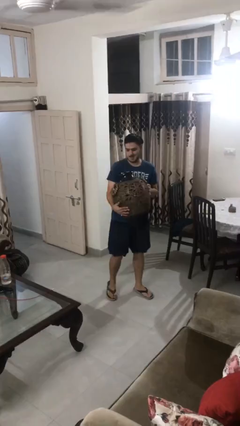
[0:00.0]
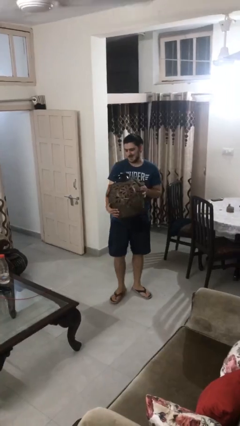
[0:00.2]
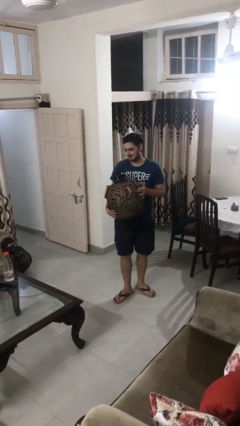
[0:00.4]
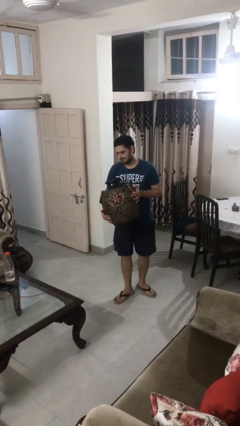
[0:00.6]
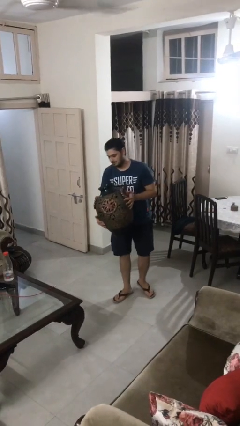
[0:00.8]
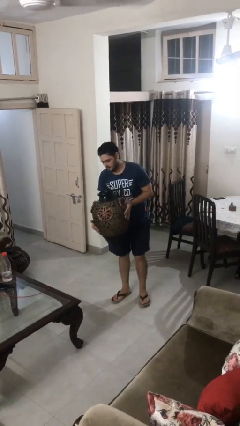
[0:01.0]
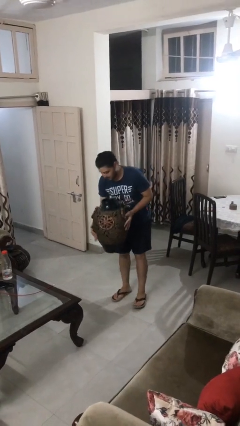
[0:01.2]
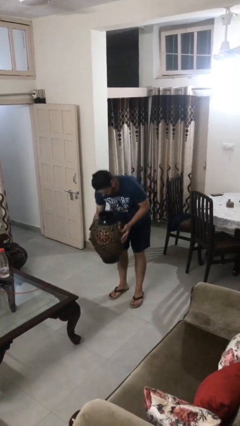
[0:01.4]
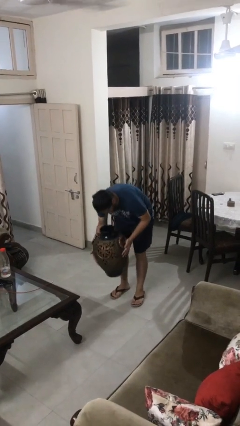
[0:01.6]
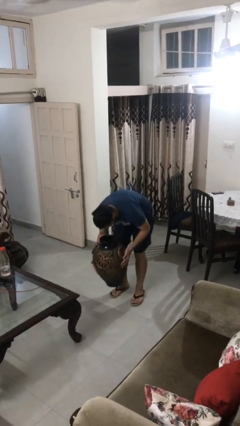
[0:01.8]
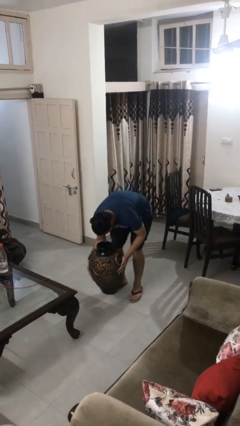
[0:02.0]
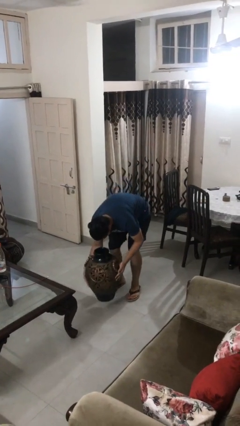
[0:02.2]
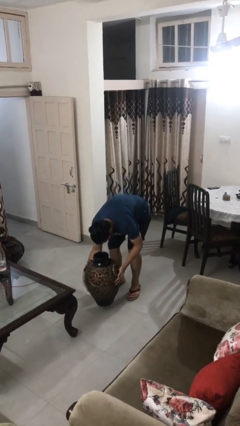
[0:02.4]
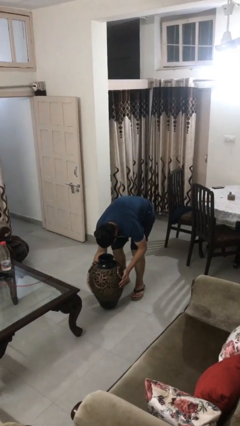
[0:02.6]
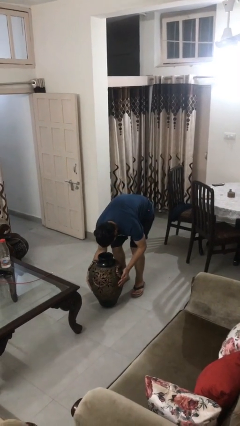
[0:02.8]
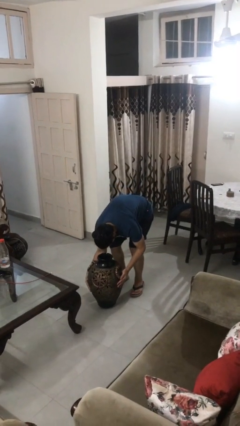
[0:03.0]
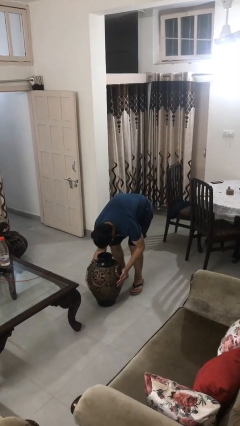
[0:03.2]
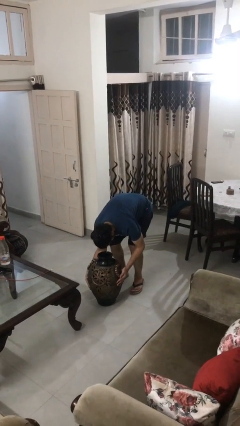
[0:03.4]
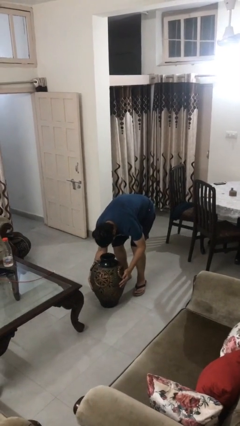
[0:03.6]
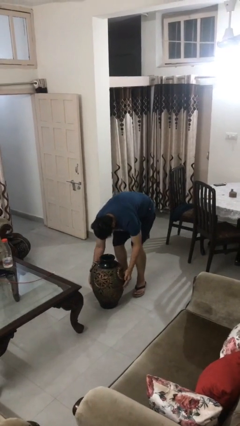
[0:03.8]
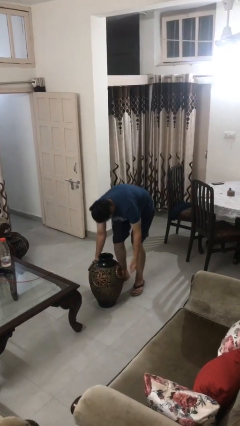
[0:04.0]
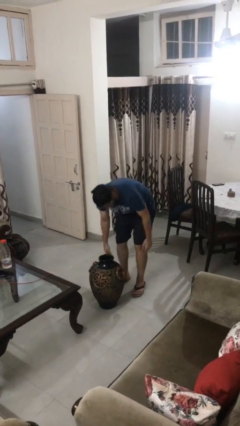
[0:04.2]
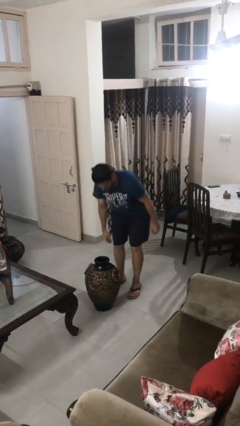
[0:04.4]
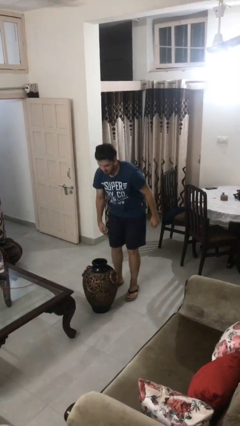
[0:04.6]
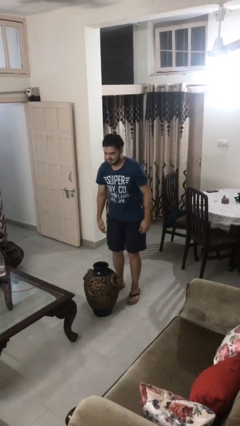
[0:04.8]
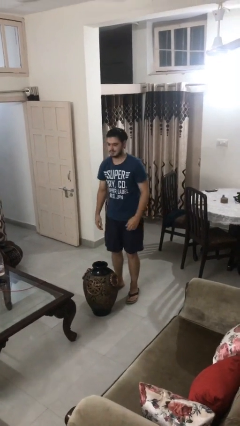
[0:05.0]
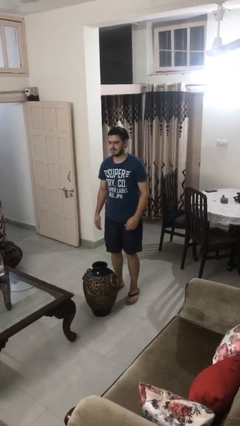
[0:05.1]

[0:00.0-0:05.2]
person puts down object on floor

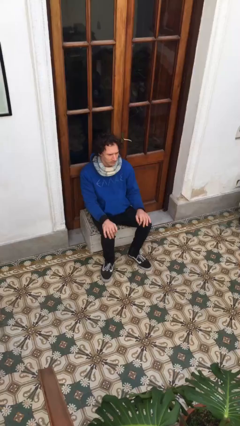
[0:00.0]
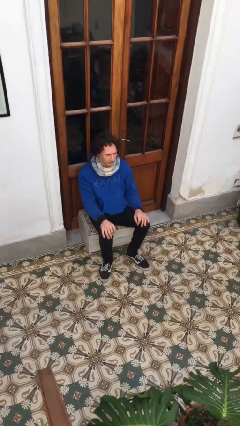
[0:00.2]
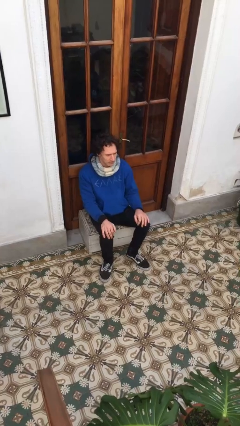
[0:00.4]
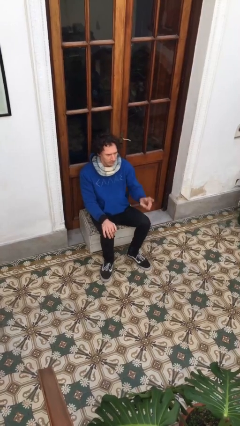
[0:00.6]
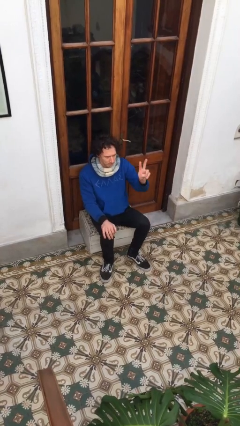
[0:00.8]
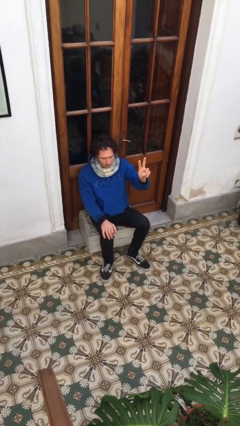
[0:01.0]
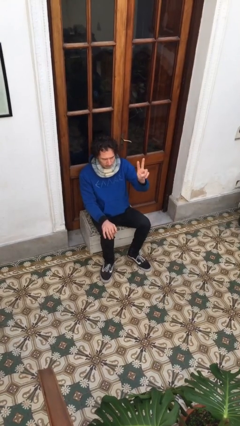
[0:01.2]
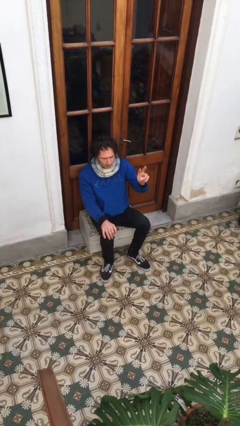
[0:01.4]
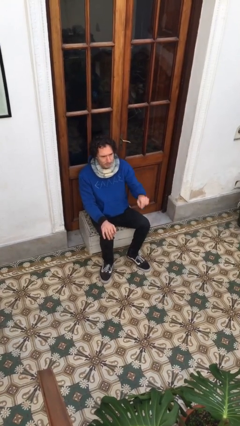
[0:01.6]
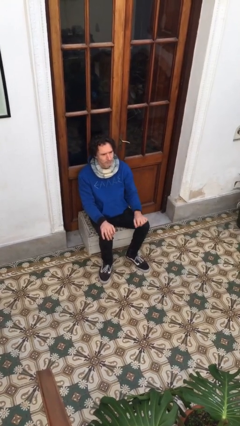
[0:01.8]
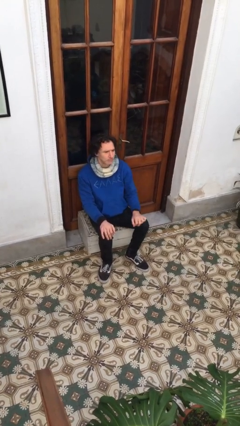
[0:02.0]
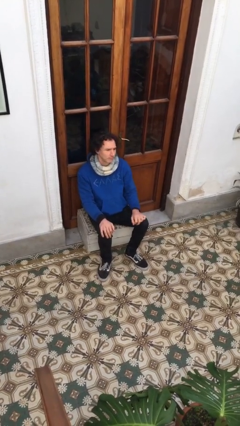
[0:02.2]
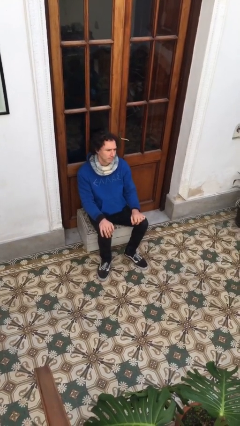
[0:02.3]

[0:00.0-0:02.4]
person gestures peace

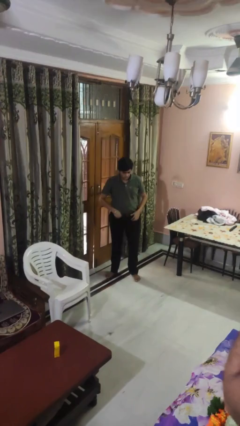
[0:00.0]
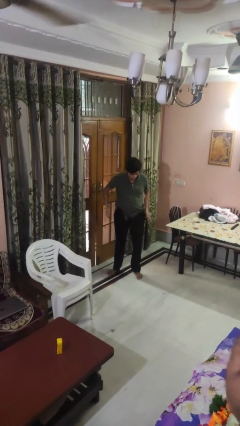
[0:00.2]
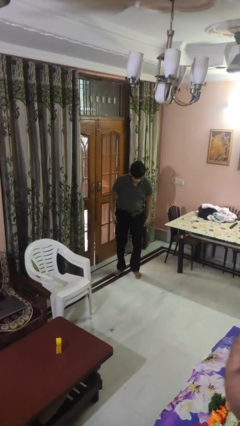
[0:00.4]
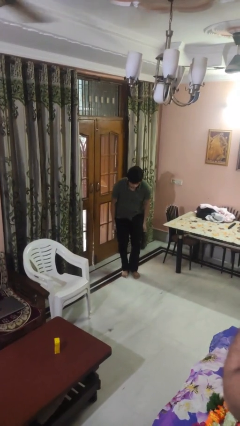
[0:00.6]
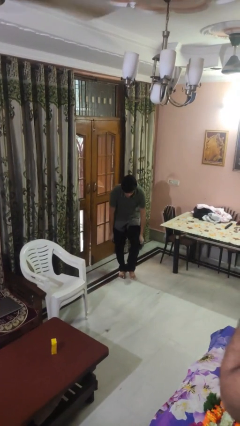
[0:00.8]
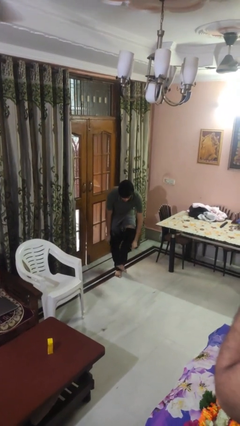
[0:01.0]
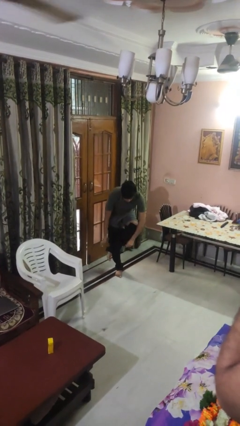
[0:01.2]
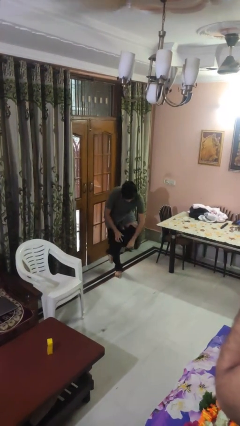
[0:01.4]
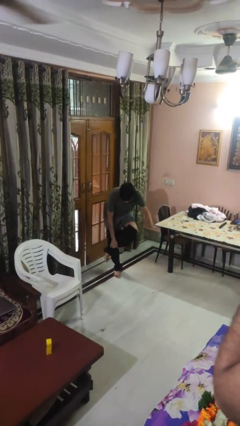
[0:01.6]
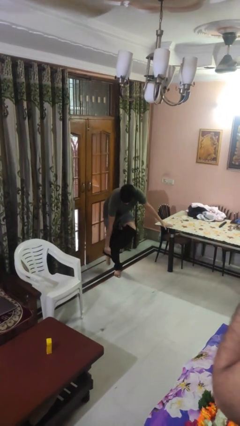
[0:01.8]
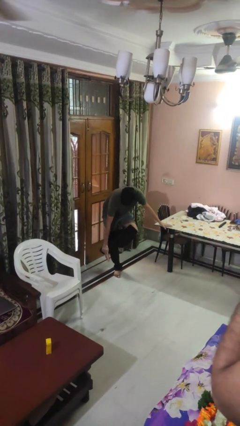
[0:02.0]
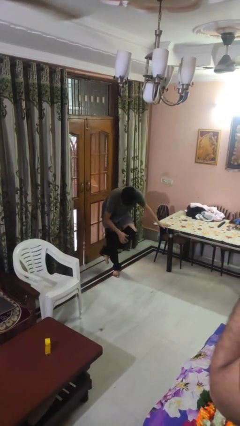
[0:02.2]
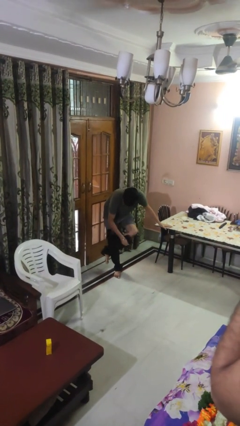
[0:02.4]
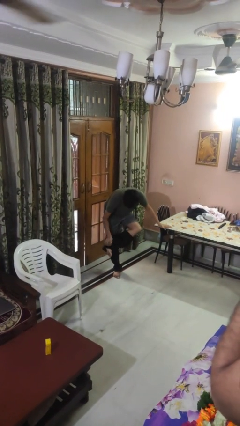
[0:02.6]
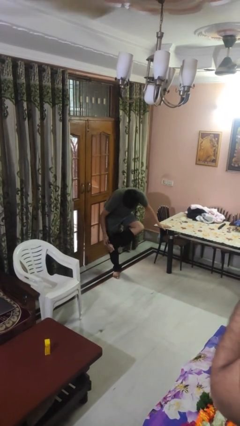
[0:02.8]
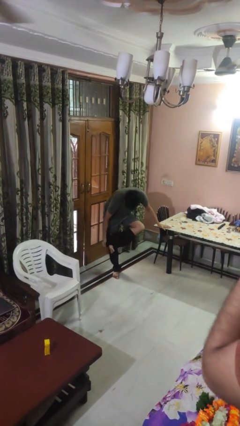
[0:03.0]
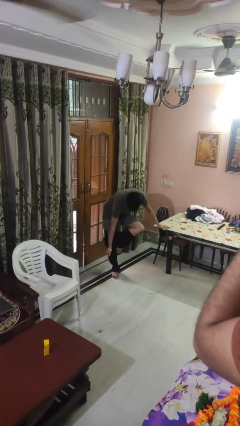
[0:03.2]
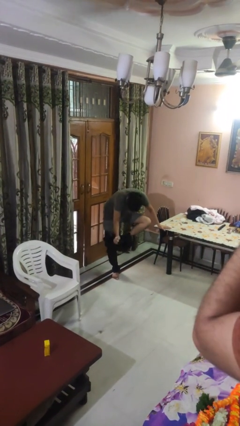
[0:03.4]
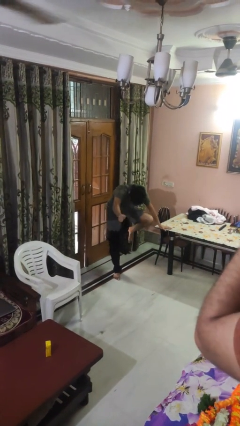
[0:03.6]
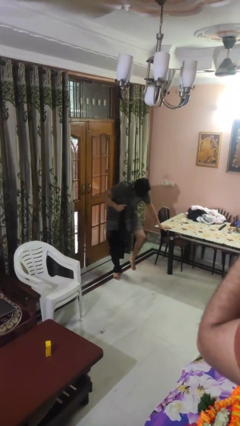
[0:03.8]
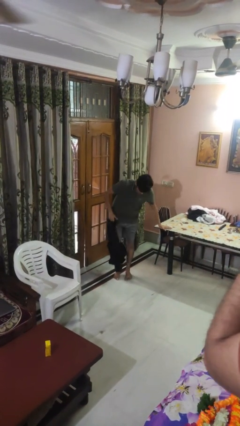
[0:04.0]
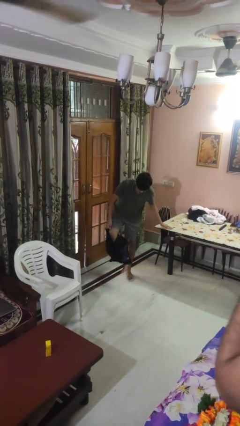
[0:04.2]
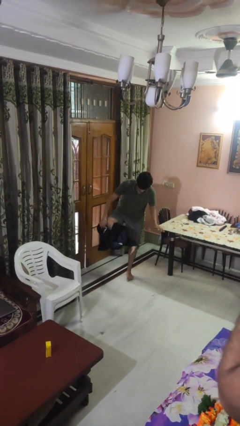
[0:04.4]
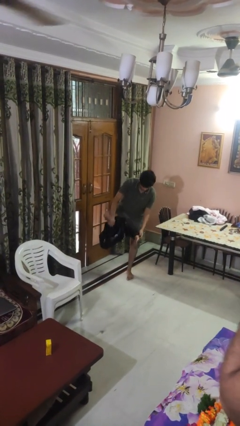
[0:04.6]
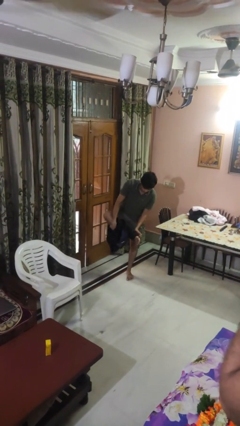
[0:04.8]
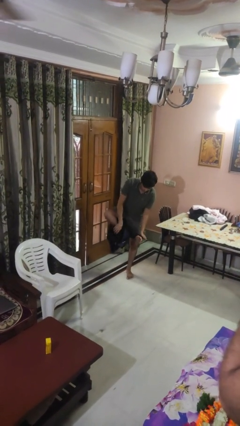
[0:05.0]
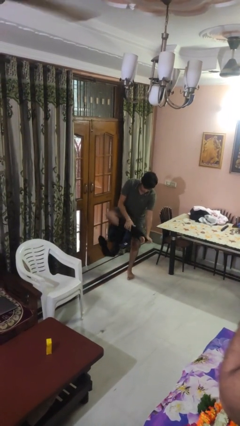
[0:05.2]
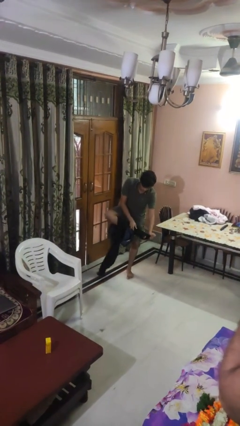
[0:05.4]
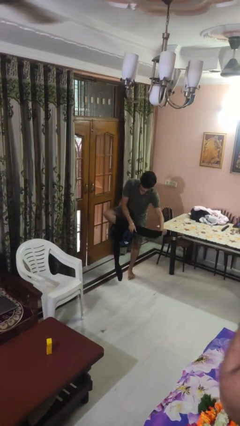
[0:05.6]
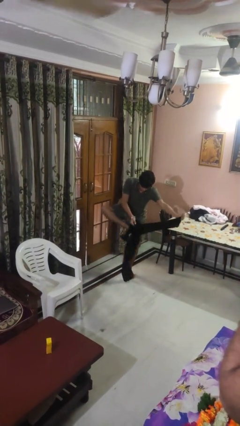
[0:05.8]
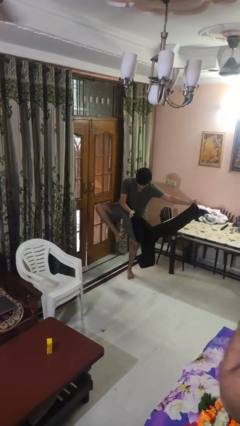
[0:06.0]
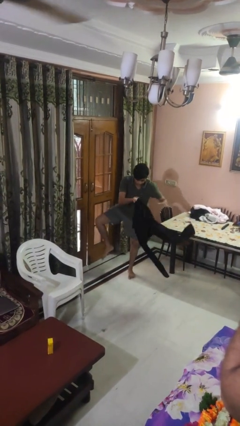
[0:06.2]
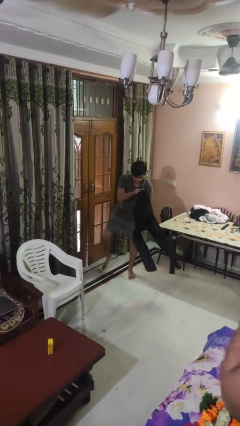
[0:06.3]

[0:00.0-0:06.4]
person takes off pants

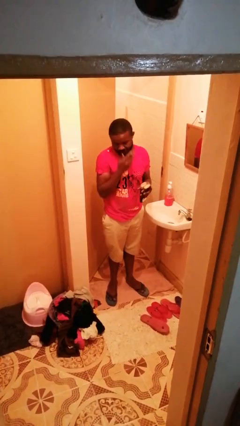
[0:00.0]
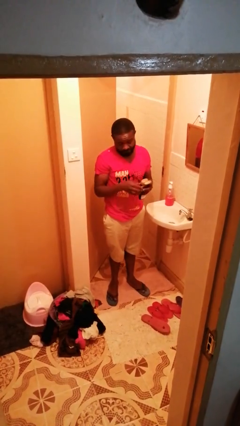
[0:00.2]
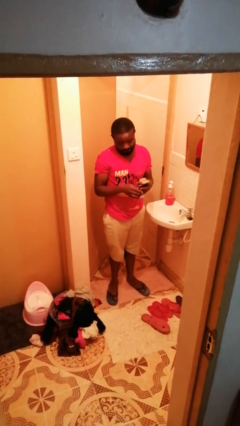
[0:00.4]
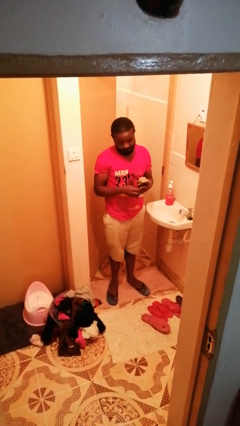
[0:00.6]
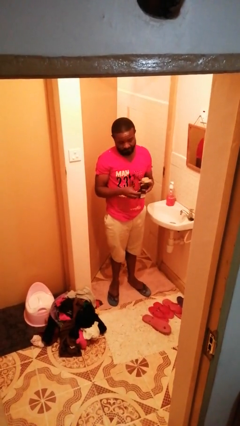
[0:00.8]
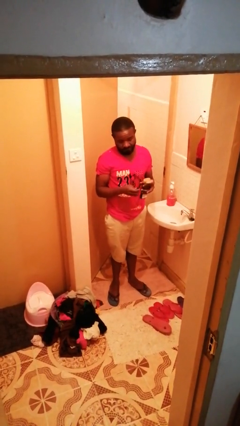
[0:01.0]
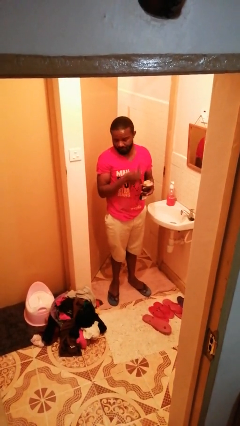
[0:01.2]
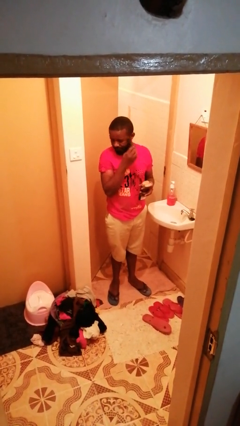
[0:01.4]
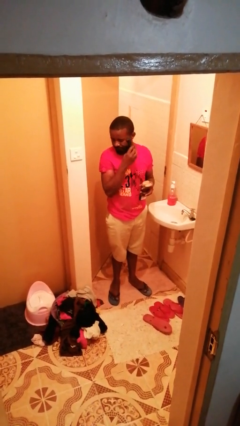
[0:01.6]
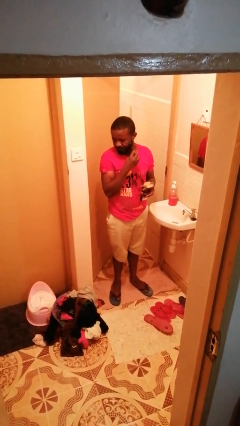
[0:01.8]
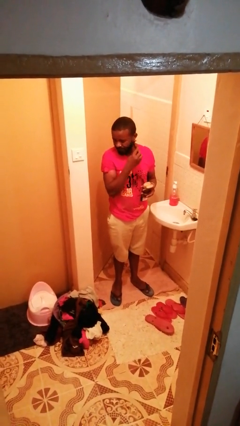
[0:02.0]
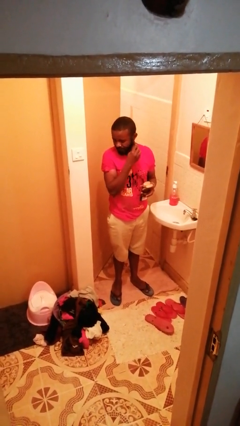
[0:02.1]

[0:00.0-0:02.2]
person shaves face

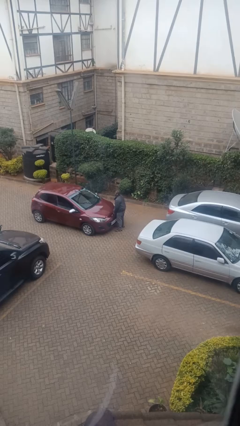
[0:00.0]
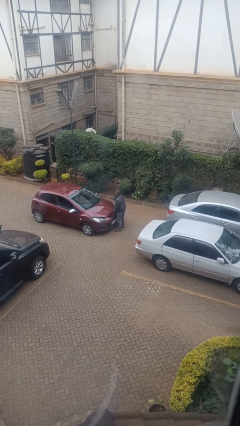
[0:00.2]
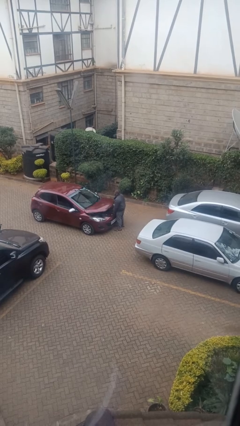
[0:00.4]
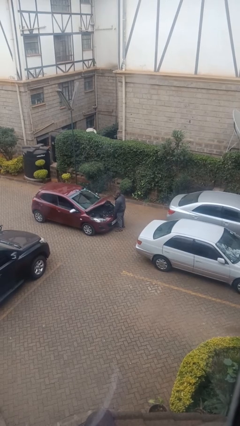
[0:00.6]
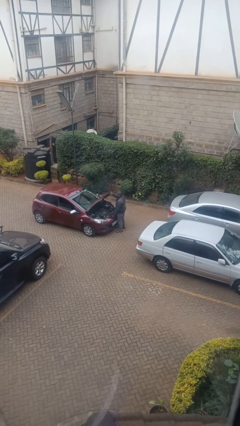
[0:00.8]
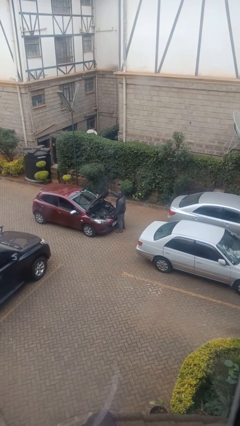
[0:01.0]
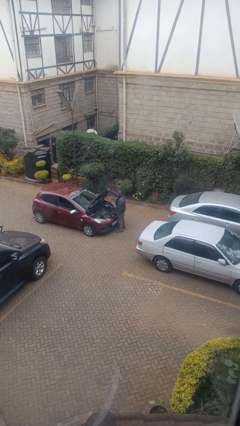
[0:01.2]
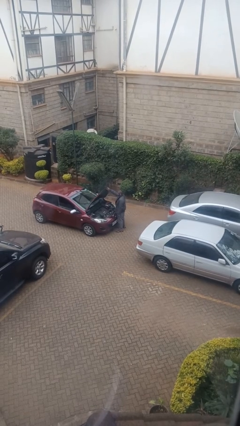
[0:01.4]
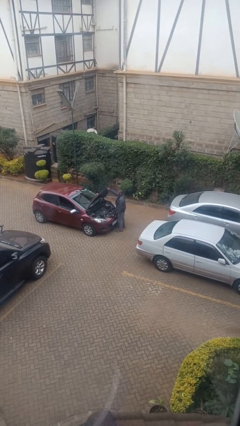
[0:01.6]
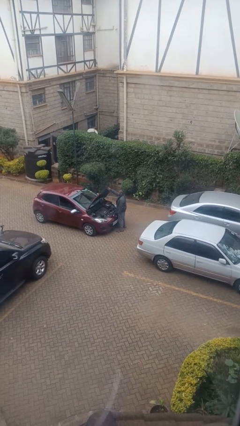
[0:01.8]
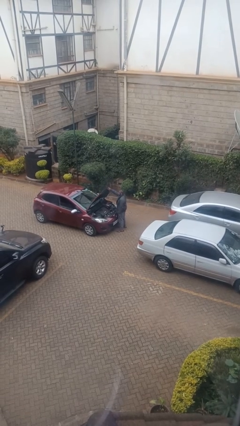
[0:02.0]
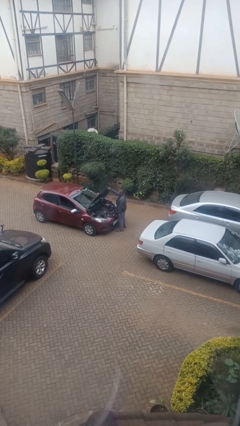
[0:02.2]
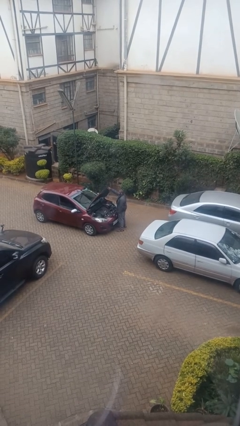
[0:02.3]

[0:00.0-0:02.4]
person opens car hood
